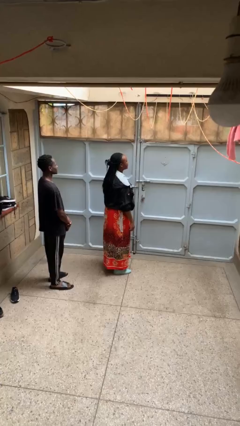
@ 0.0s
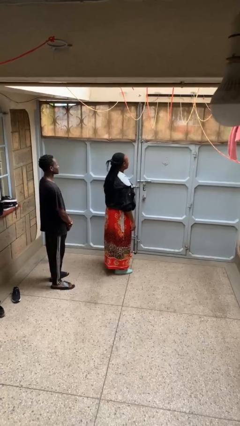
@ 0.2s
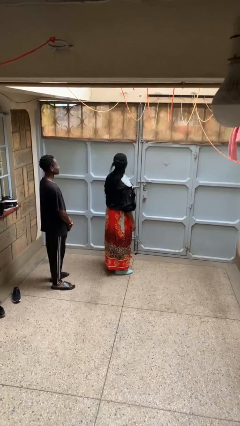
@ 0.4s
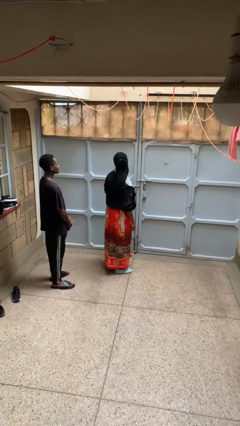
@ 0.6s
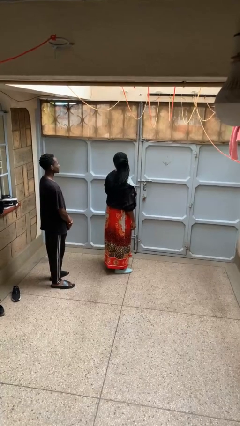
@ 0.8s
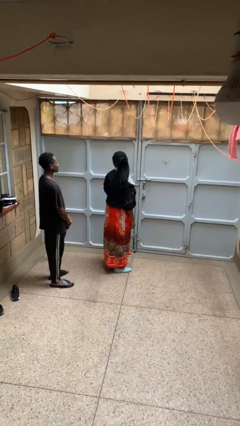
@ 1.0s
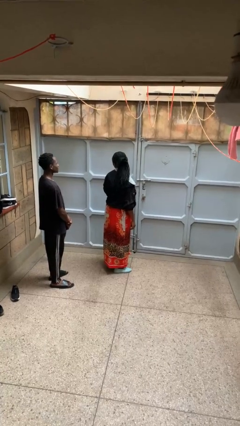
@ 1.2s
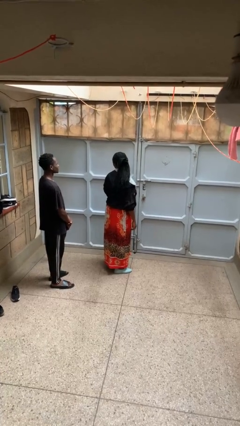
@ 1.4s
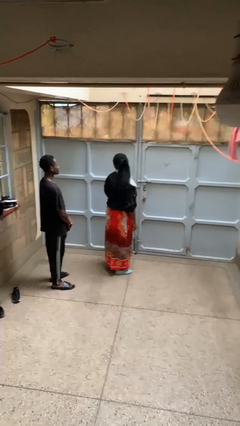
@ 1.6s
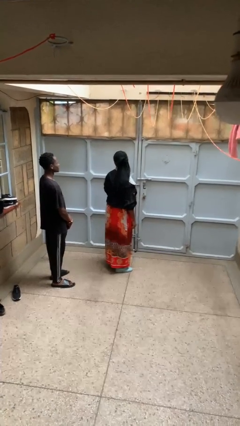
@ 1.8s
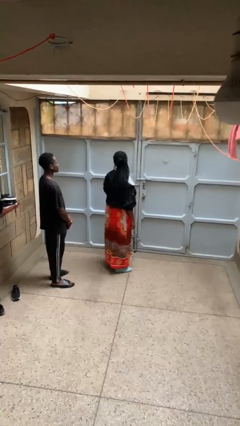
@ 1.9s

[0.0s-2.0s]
person looks over shoulder

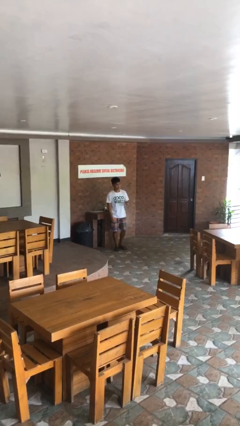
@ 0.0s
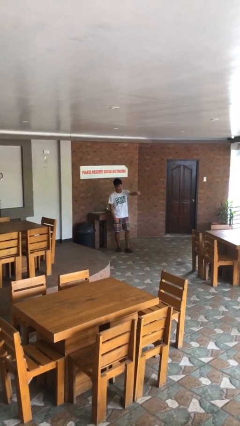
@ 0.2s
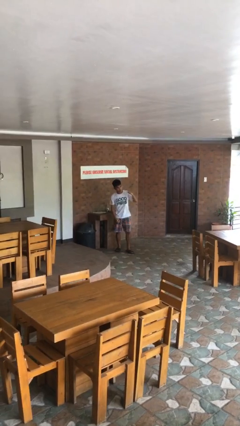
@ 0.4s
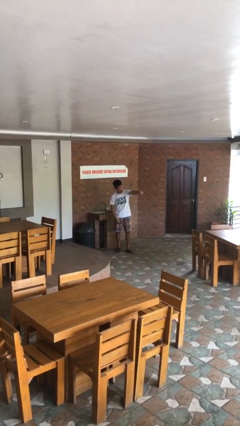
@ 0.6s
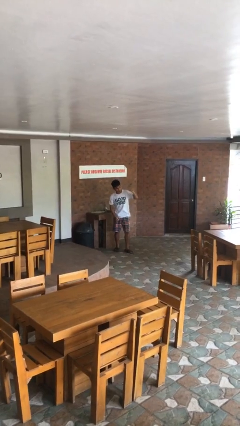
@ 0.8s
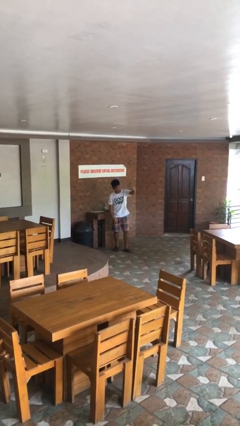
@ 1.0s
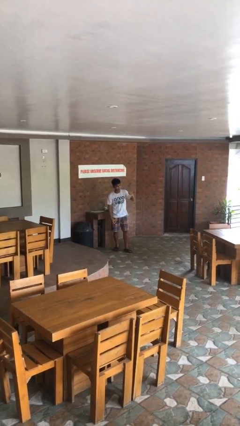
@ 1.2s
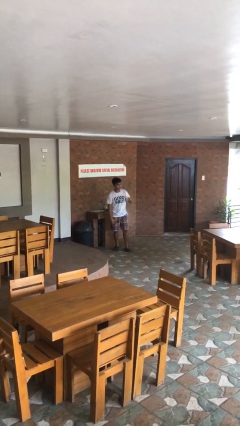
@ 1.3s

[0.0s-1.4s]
person punches

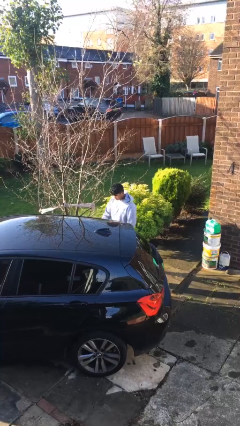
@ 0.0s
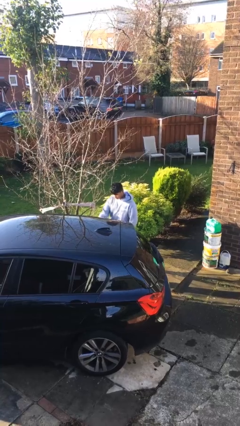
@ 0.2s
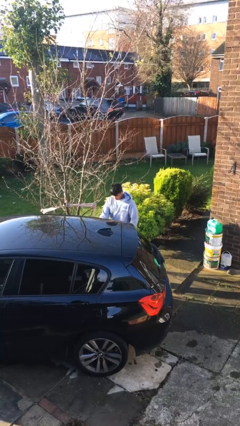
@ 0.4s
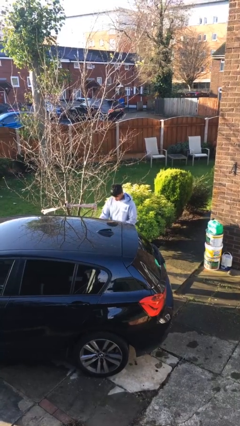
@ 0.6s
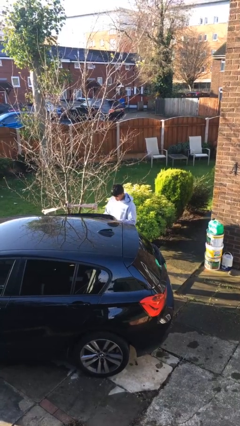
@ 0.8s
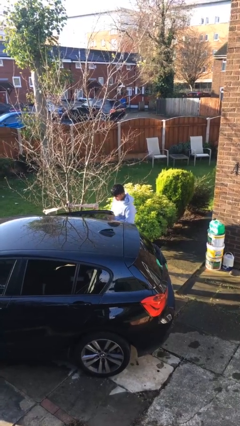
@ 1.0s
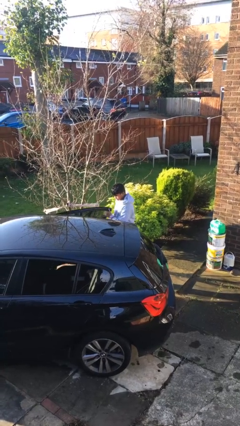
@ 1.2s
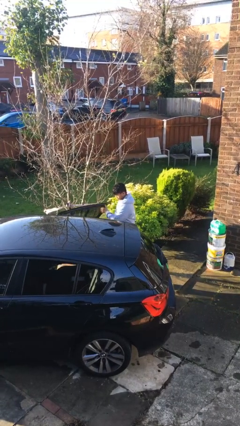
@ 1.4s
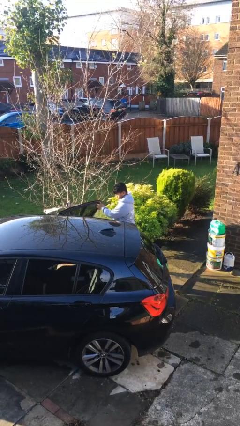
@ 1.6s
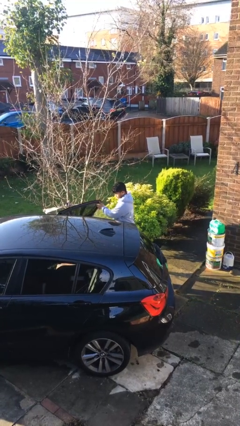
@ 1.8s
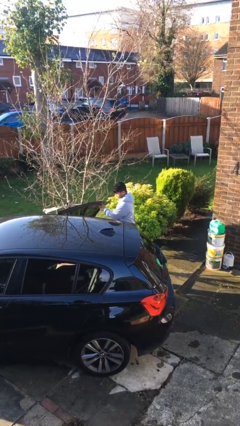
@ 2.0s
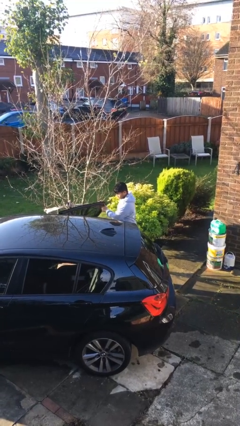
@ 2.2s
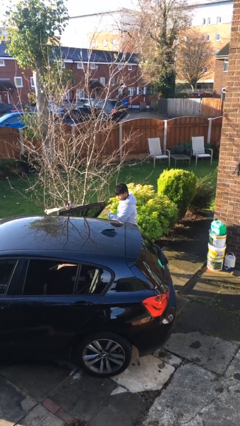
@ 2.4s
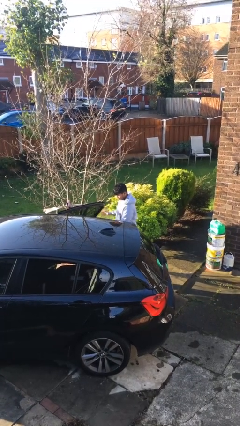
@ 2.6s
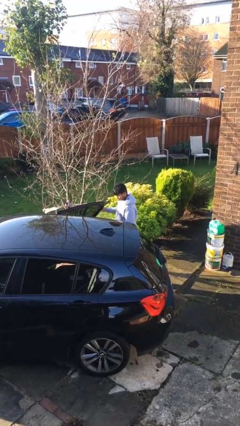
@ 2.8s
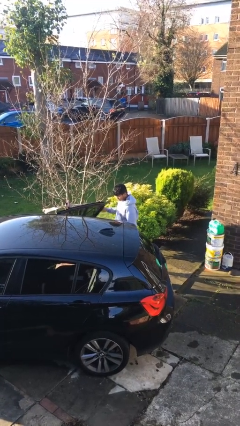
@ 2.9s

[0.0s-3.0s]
person opens car door

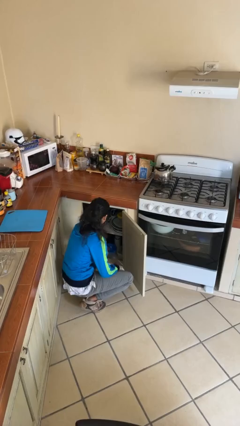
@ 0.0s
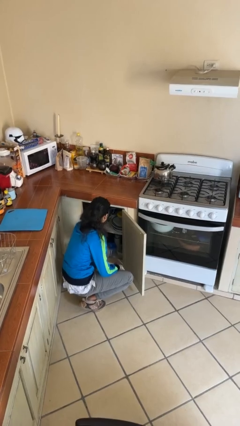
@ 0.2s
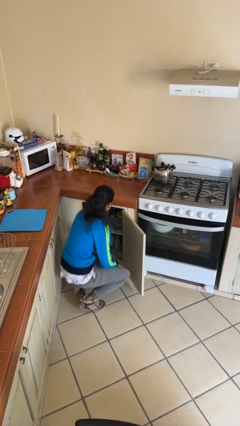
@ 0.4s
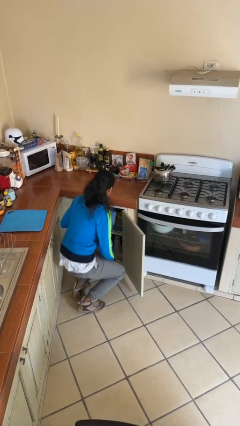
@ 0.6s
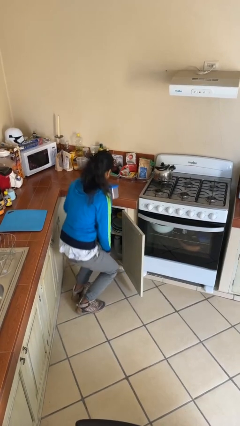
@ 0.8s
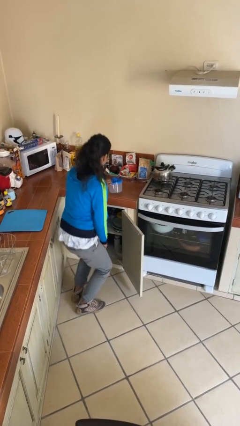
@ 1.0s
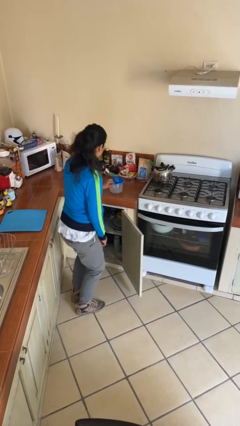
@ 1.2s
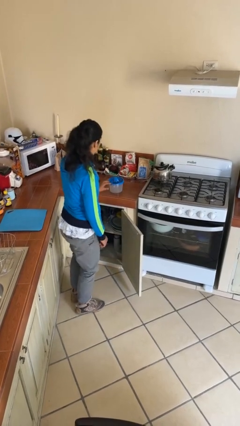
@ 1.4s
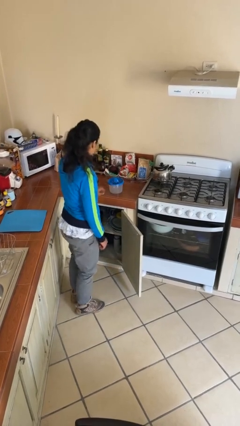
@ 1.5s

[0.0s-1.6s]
person takes object from cabinet

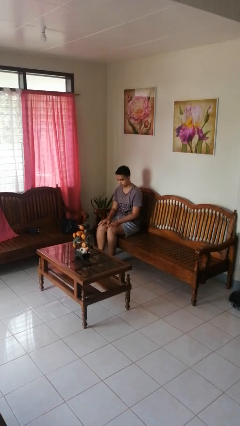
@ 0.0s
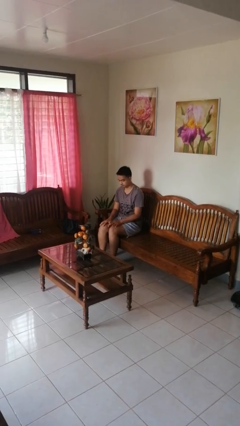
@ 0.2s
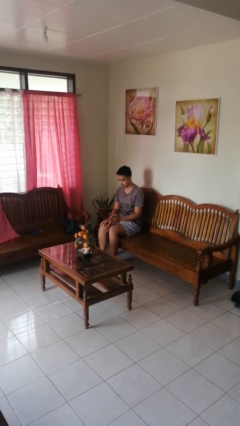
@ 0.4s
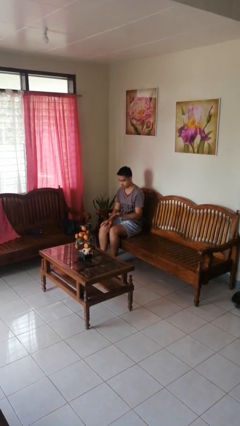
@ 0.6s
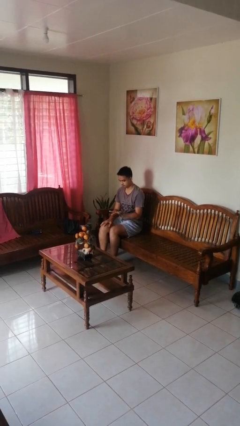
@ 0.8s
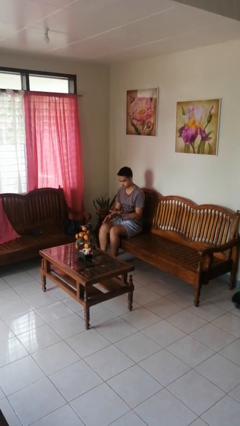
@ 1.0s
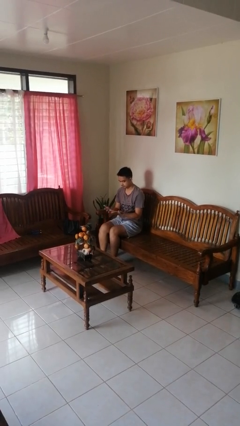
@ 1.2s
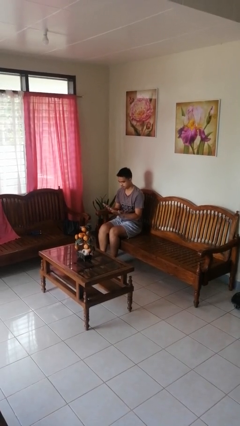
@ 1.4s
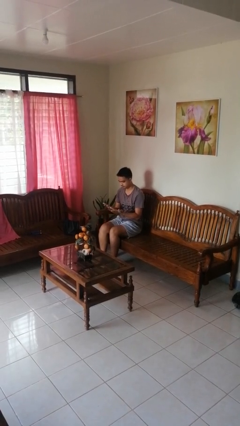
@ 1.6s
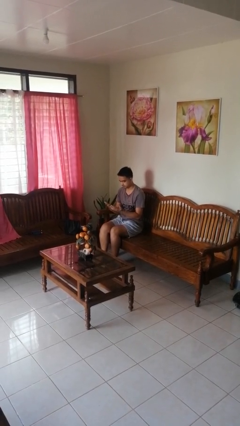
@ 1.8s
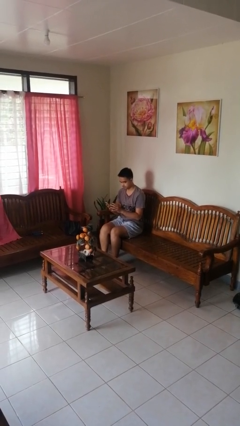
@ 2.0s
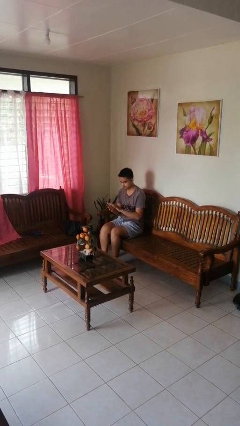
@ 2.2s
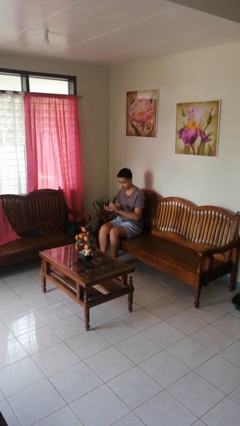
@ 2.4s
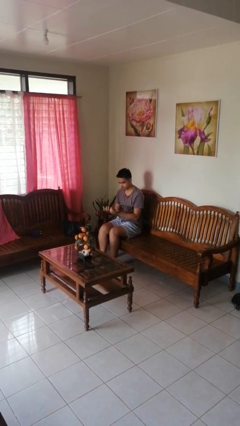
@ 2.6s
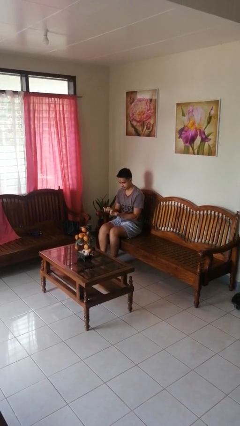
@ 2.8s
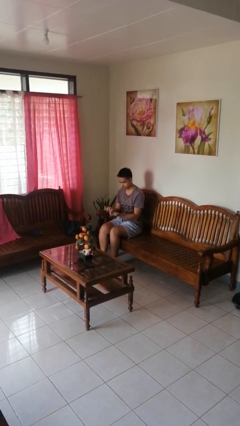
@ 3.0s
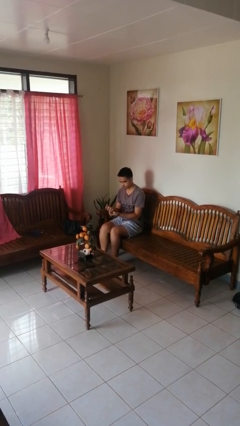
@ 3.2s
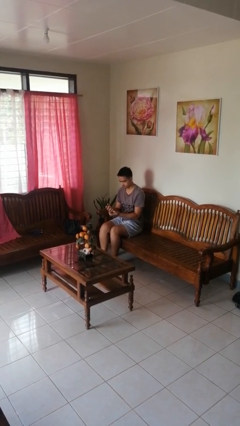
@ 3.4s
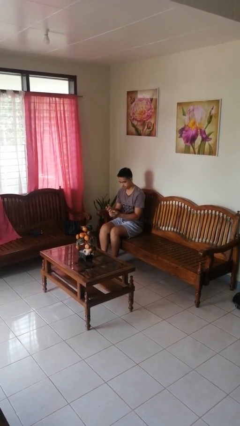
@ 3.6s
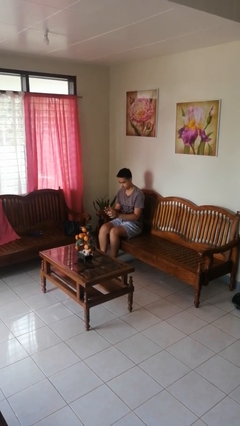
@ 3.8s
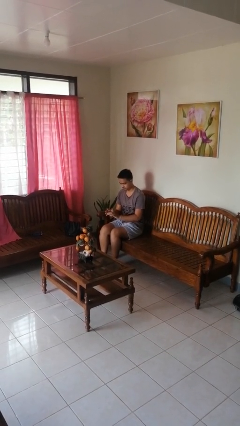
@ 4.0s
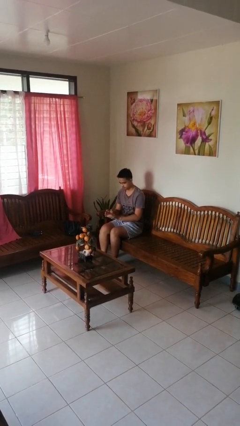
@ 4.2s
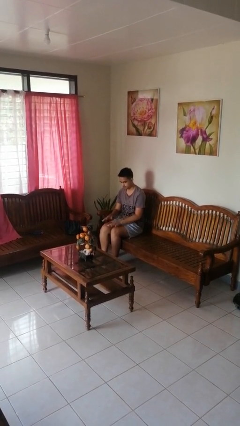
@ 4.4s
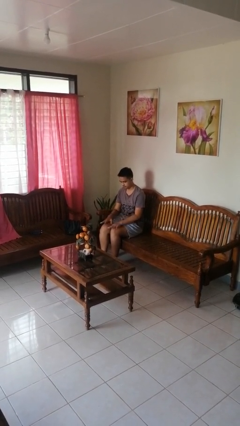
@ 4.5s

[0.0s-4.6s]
person looks at hands in lap

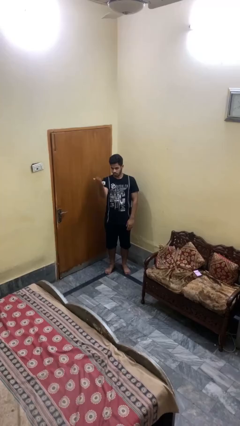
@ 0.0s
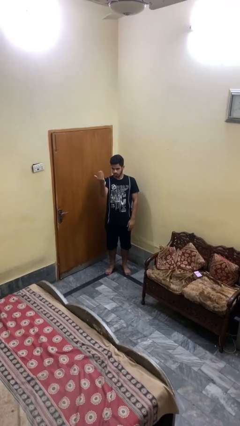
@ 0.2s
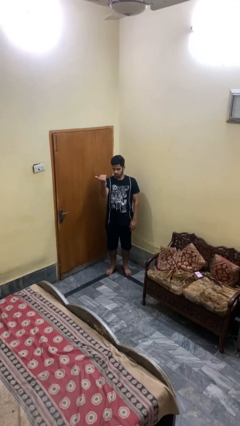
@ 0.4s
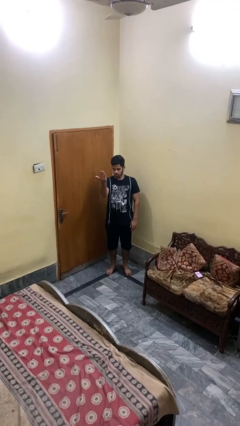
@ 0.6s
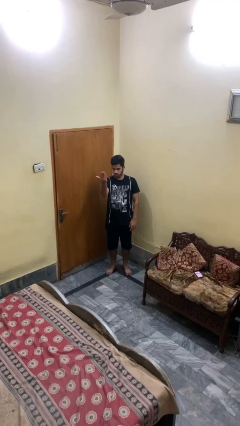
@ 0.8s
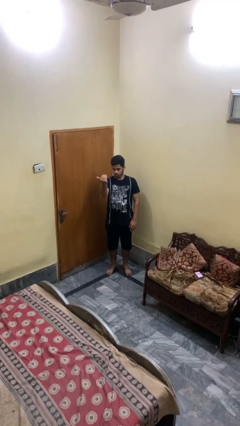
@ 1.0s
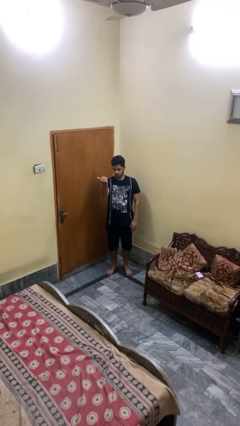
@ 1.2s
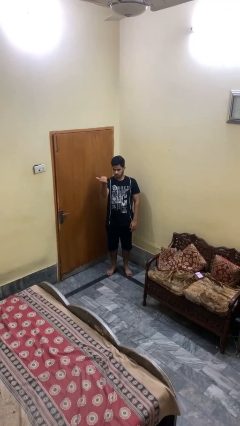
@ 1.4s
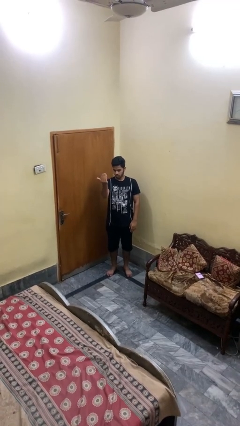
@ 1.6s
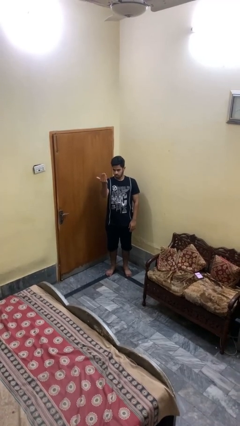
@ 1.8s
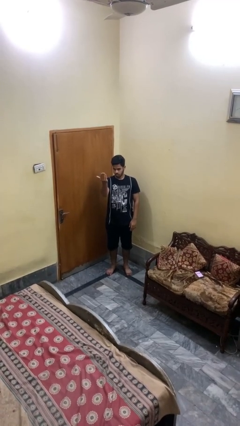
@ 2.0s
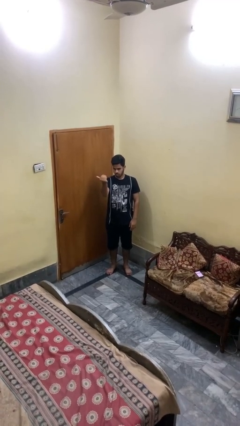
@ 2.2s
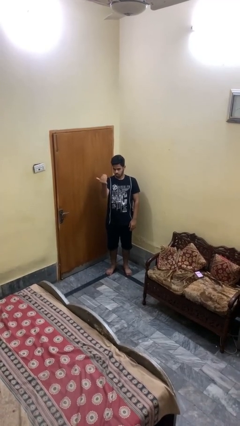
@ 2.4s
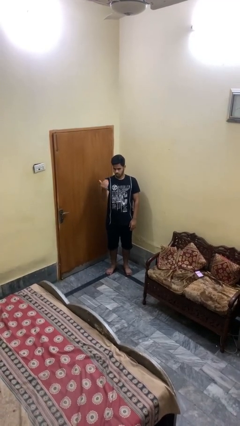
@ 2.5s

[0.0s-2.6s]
person gestures come here

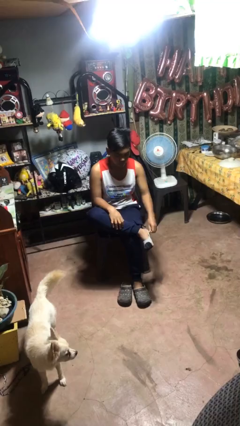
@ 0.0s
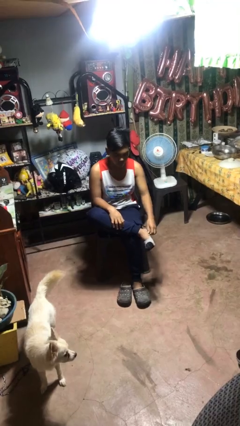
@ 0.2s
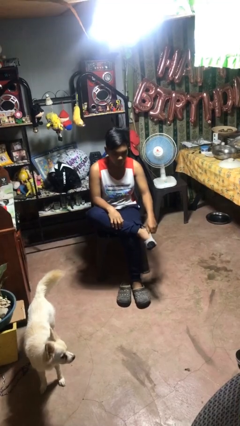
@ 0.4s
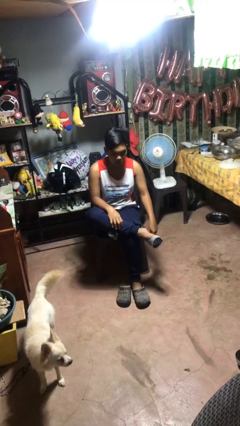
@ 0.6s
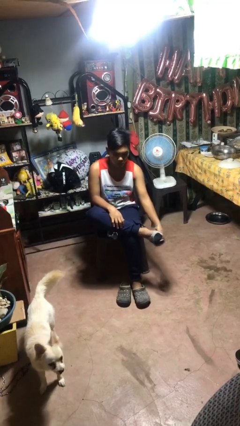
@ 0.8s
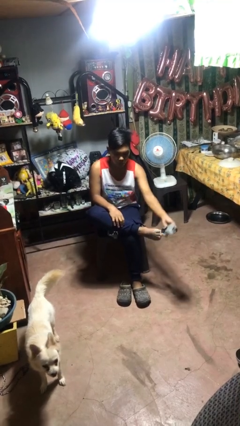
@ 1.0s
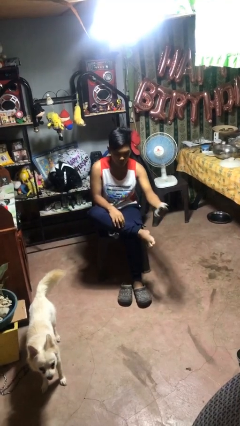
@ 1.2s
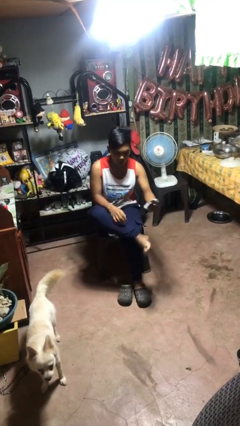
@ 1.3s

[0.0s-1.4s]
person takes off socks
